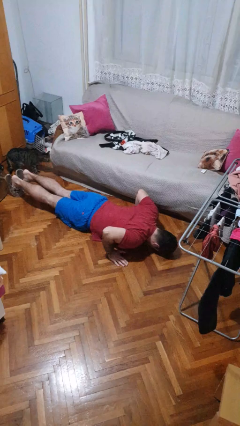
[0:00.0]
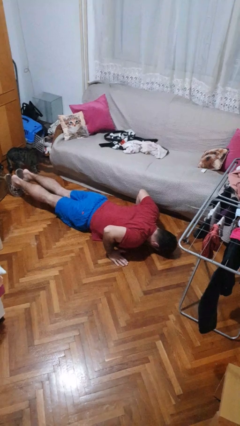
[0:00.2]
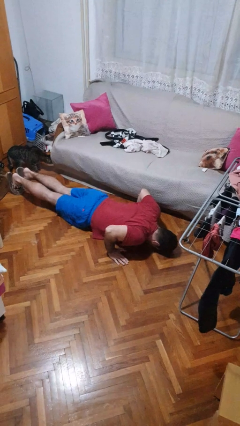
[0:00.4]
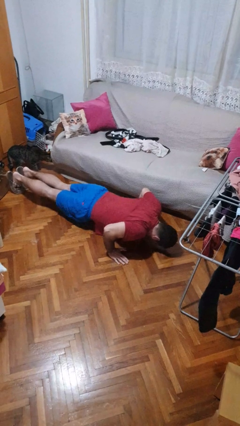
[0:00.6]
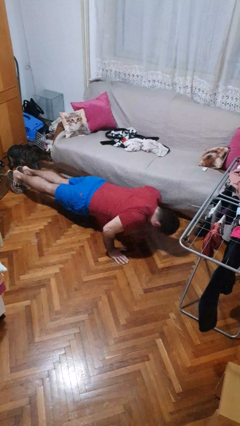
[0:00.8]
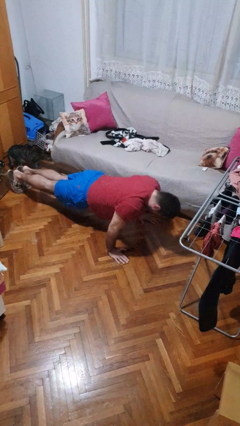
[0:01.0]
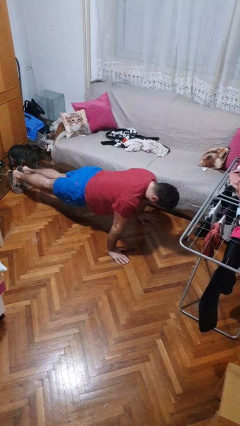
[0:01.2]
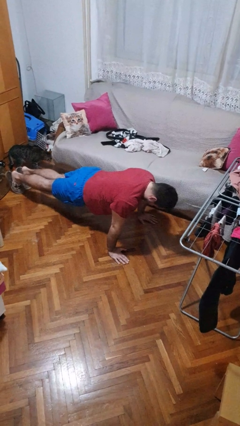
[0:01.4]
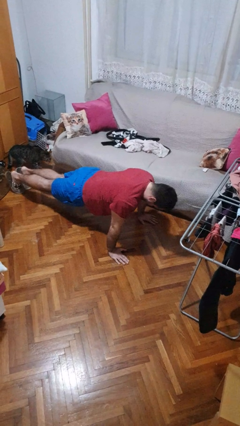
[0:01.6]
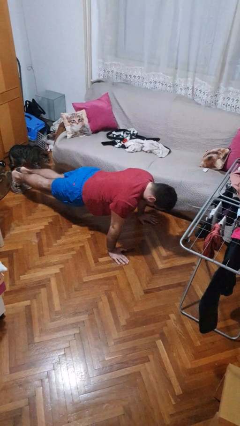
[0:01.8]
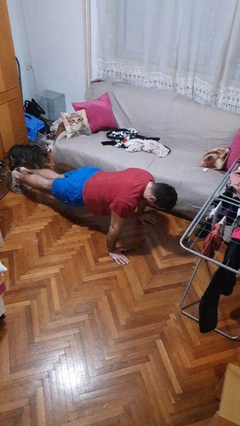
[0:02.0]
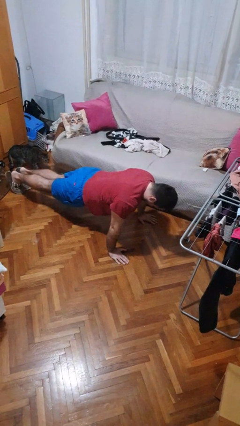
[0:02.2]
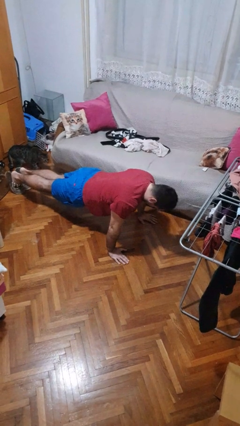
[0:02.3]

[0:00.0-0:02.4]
person exercises with pushup

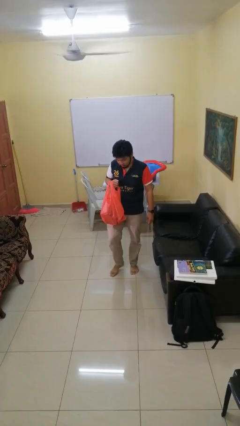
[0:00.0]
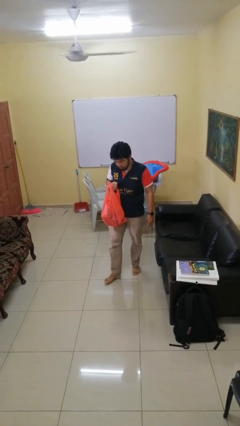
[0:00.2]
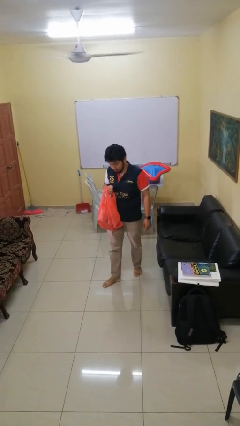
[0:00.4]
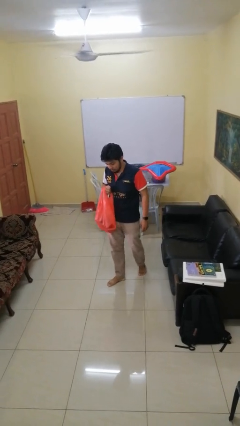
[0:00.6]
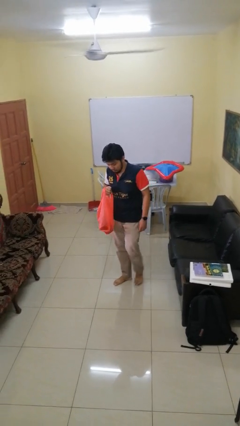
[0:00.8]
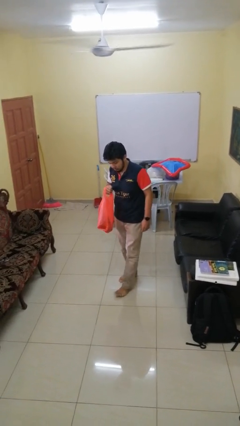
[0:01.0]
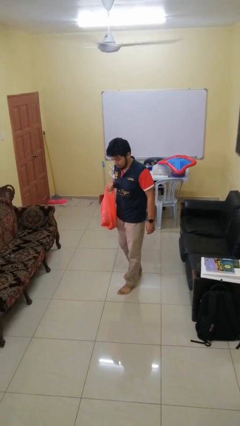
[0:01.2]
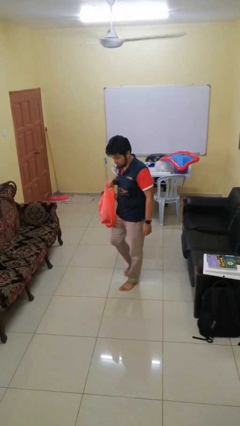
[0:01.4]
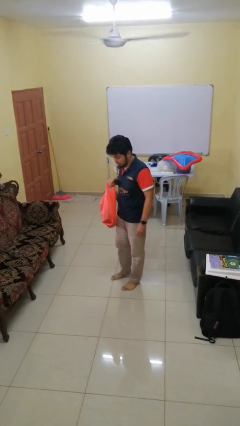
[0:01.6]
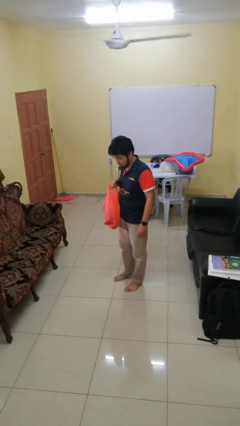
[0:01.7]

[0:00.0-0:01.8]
person carries groceries

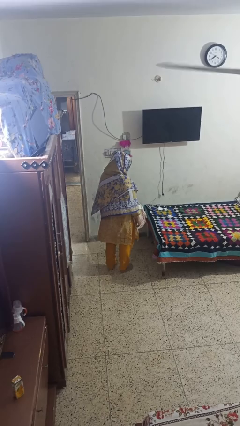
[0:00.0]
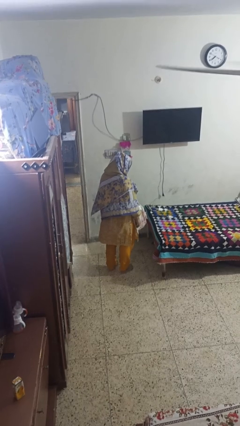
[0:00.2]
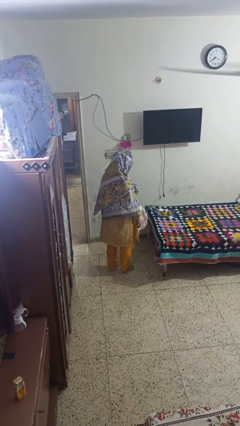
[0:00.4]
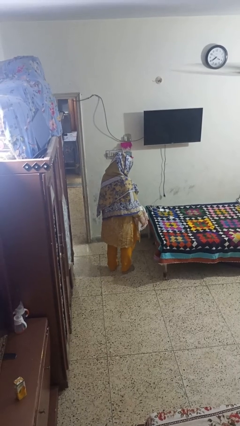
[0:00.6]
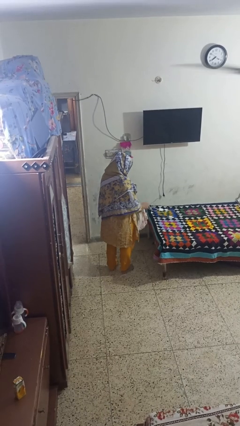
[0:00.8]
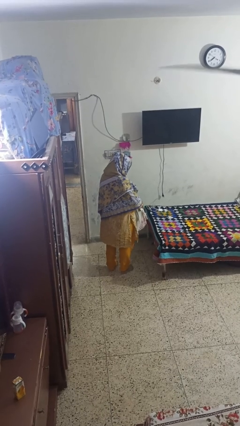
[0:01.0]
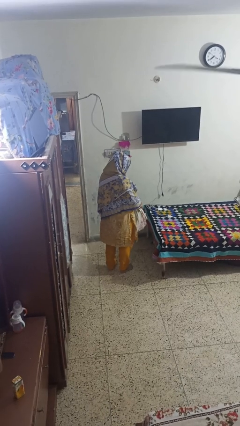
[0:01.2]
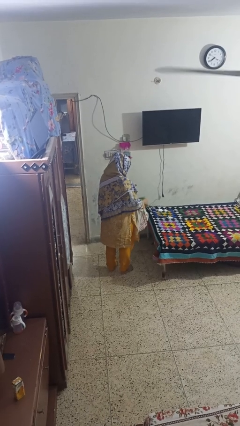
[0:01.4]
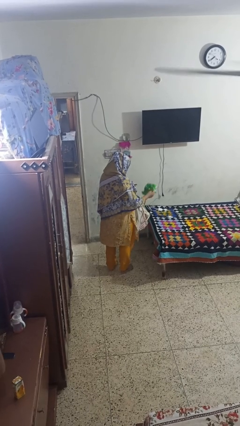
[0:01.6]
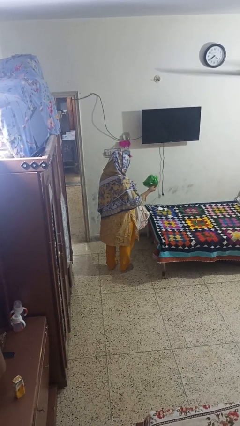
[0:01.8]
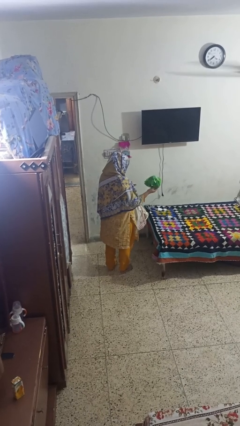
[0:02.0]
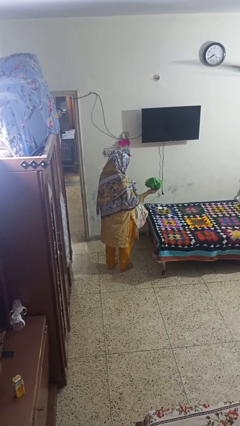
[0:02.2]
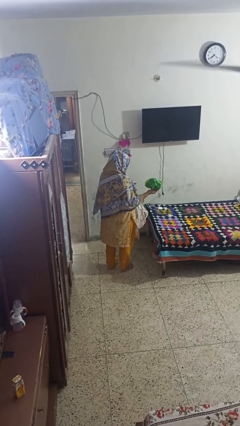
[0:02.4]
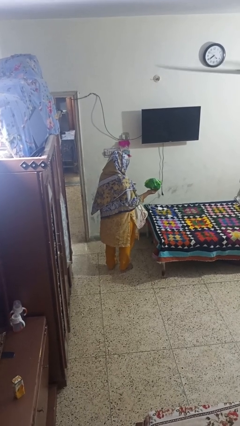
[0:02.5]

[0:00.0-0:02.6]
person takes object from bag

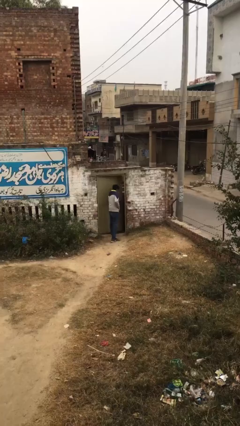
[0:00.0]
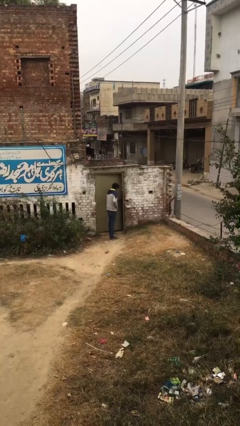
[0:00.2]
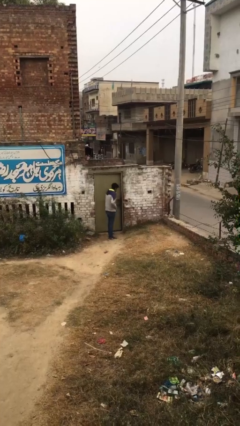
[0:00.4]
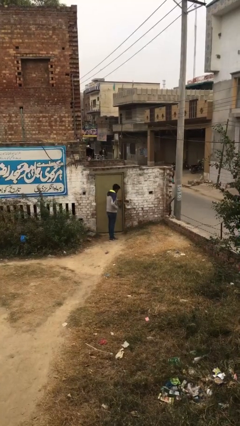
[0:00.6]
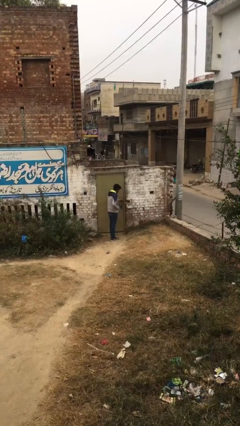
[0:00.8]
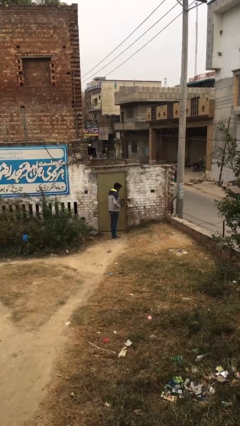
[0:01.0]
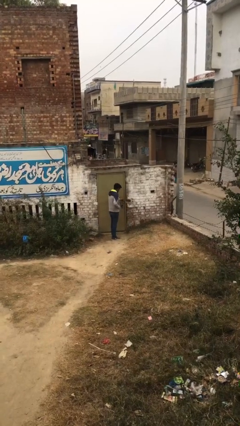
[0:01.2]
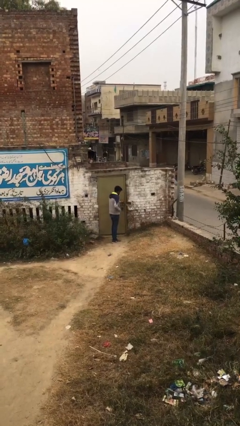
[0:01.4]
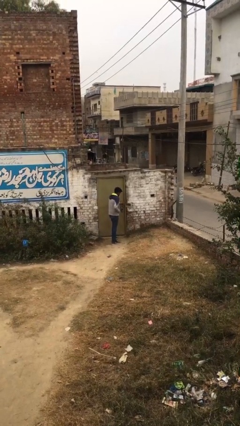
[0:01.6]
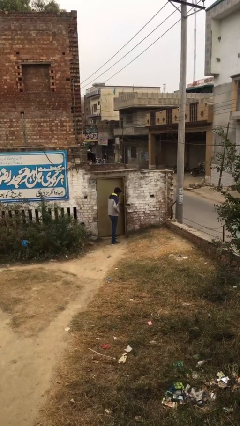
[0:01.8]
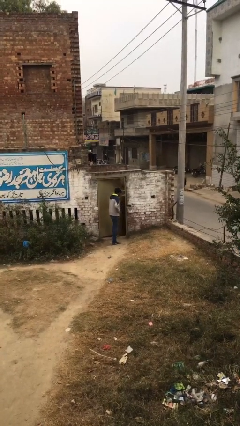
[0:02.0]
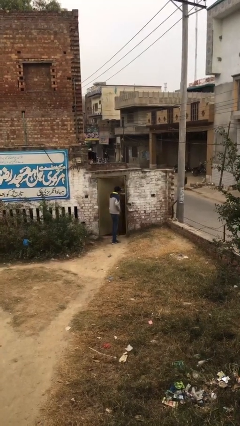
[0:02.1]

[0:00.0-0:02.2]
person closes facility door

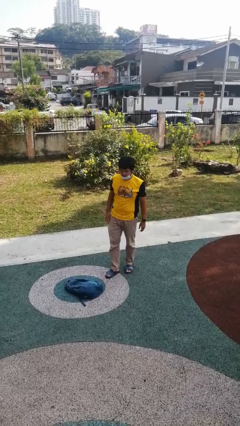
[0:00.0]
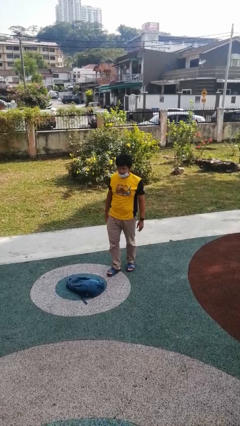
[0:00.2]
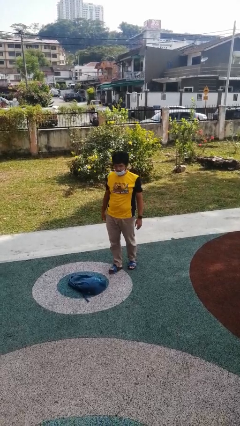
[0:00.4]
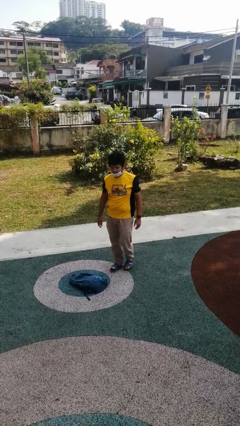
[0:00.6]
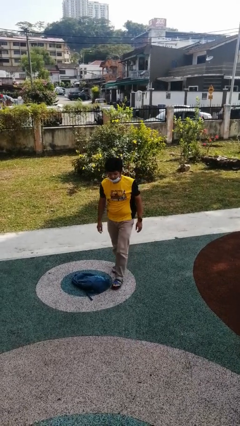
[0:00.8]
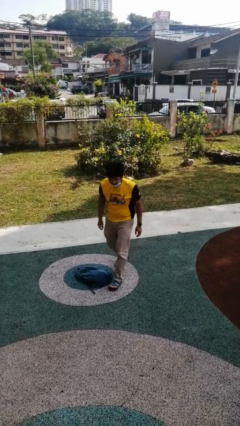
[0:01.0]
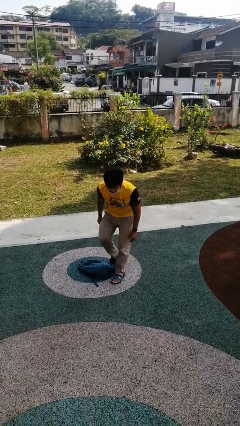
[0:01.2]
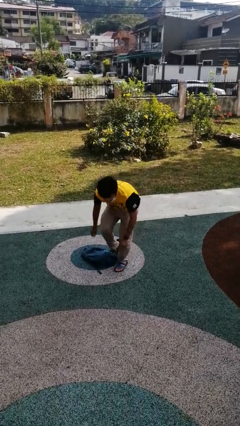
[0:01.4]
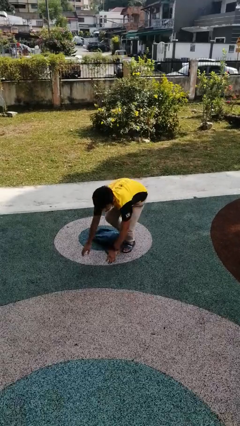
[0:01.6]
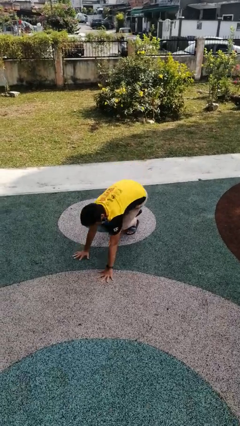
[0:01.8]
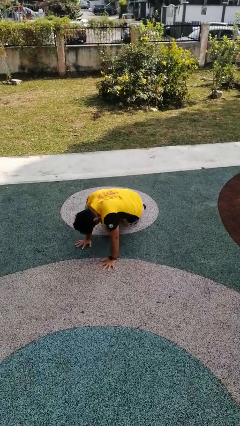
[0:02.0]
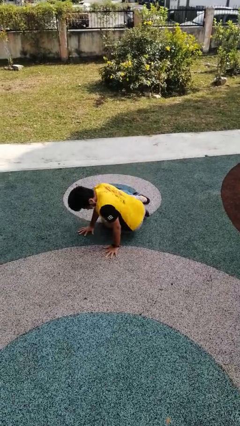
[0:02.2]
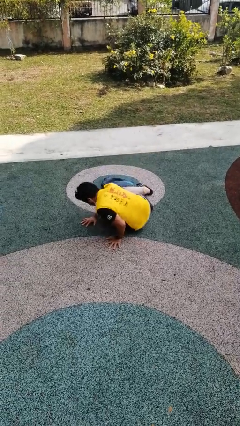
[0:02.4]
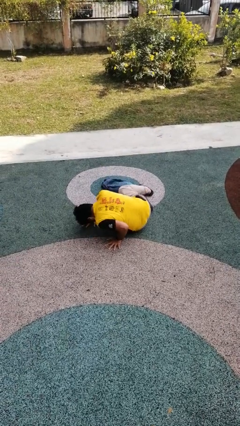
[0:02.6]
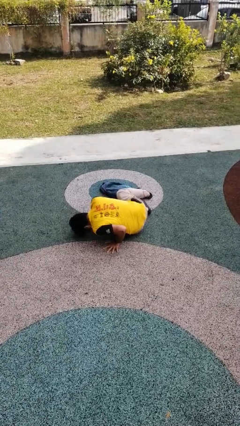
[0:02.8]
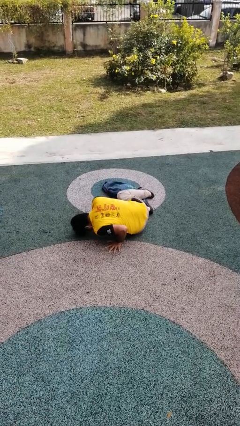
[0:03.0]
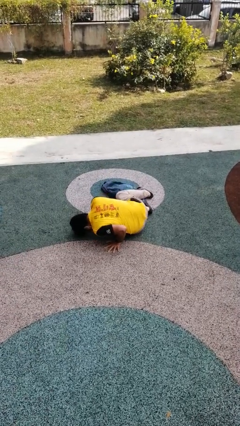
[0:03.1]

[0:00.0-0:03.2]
person trips on object on floor

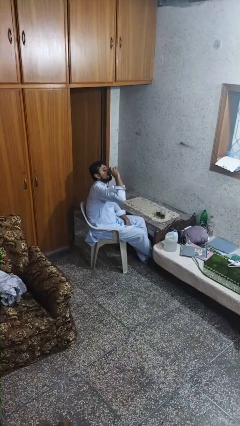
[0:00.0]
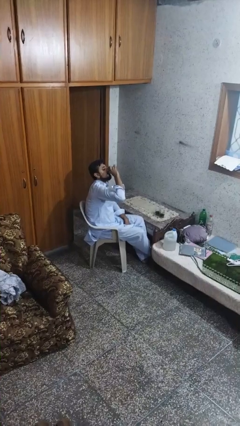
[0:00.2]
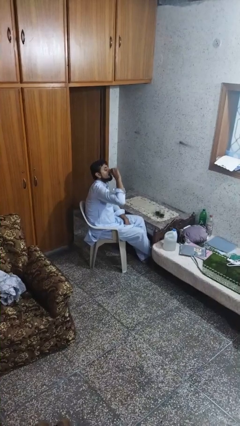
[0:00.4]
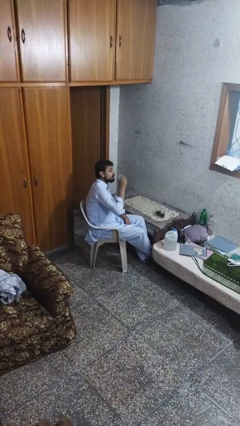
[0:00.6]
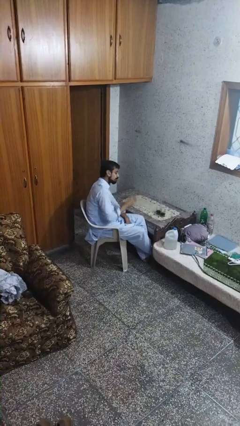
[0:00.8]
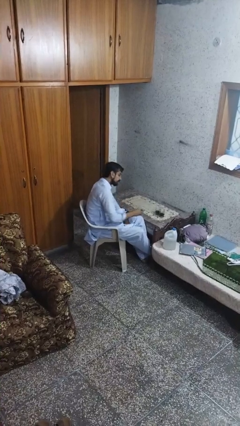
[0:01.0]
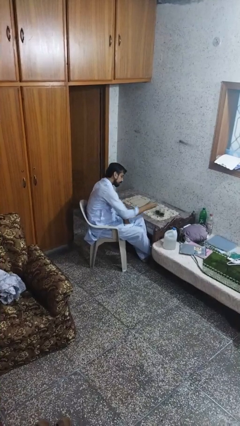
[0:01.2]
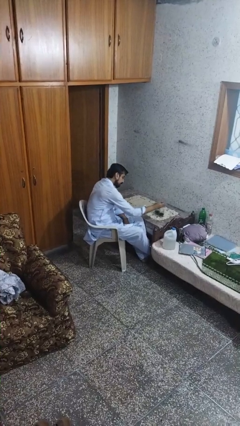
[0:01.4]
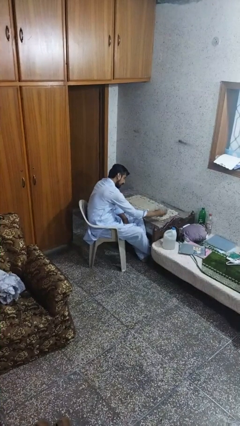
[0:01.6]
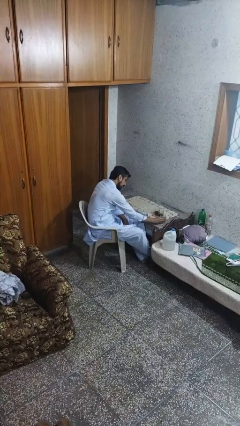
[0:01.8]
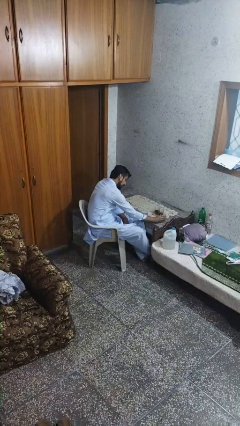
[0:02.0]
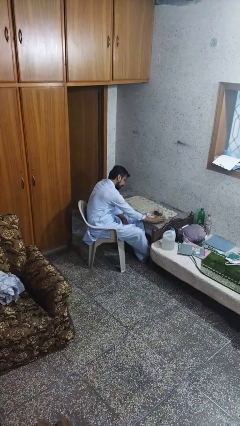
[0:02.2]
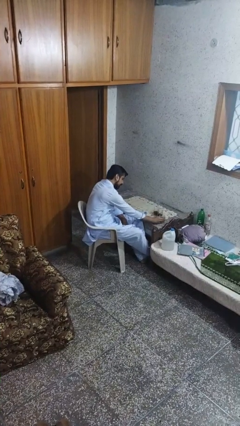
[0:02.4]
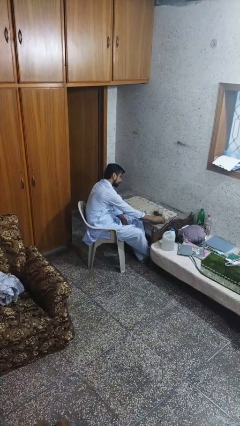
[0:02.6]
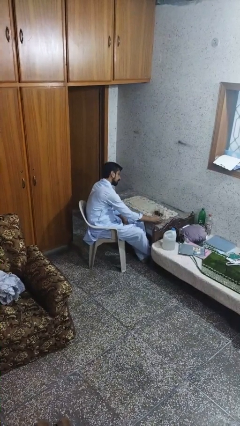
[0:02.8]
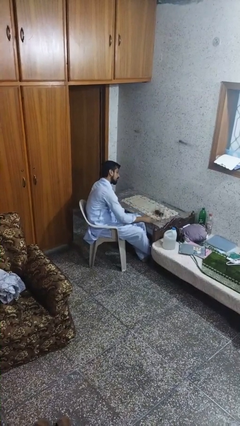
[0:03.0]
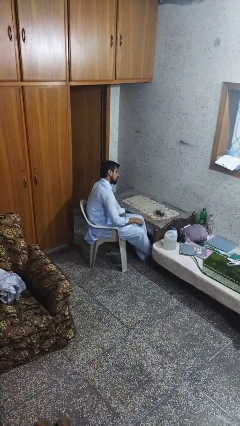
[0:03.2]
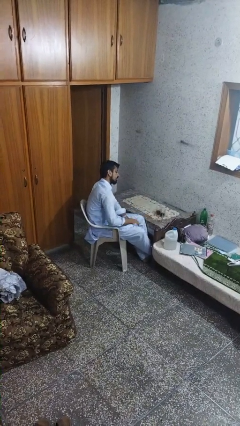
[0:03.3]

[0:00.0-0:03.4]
person puts down object on table

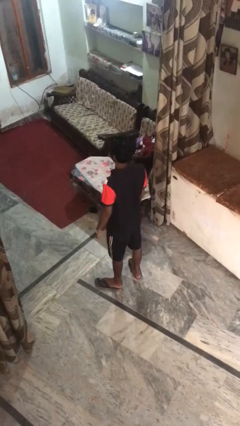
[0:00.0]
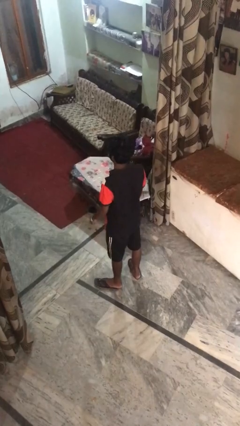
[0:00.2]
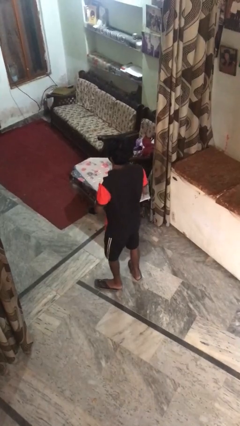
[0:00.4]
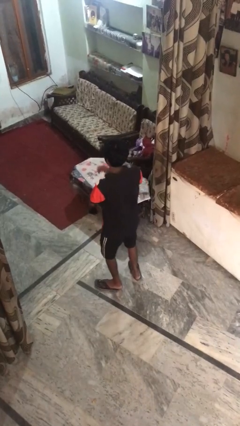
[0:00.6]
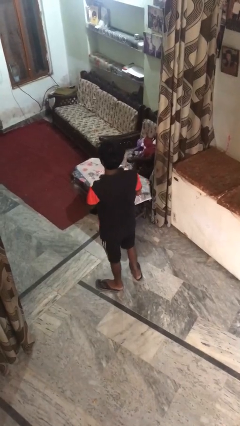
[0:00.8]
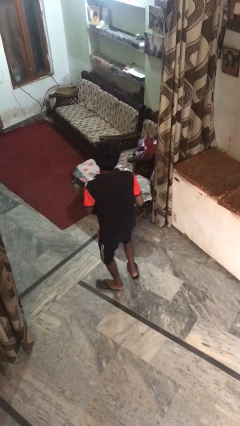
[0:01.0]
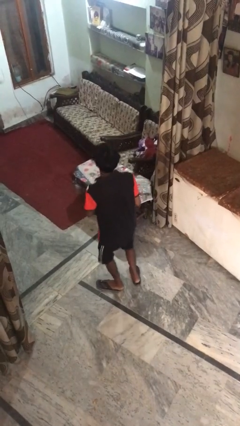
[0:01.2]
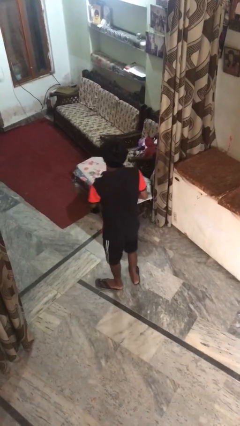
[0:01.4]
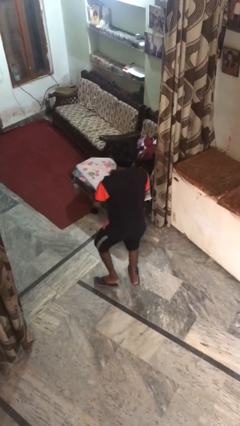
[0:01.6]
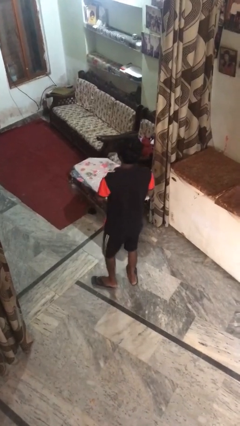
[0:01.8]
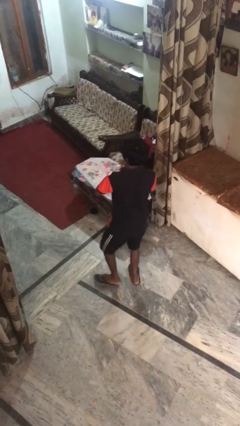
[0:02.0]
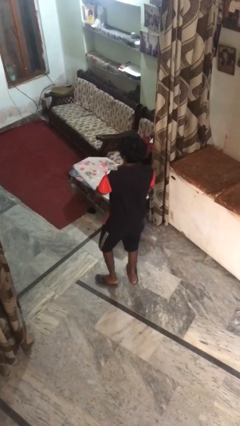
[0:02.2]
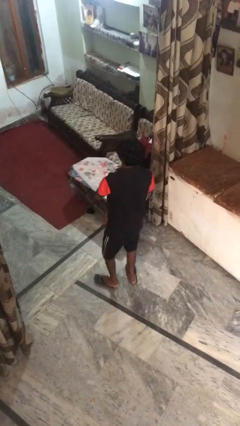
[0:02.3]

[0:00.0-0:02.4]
person dances in place
